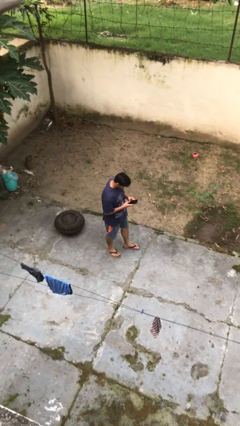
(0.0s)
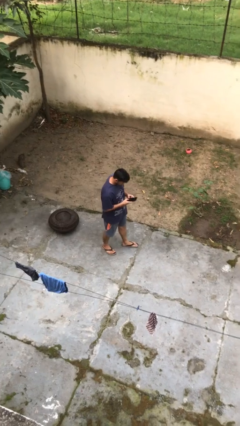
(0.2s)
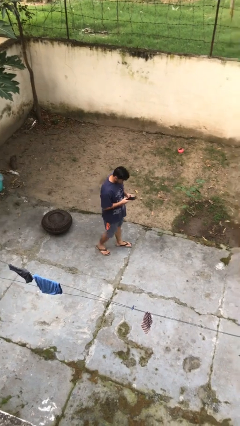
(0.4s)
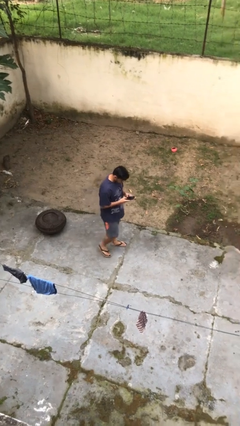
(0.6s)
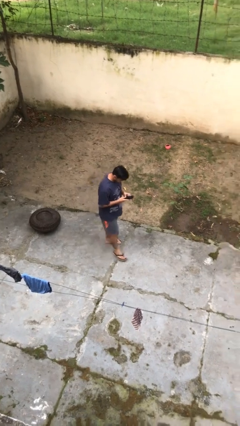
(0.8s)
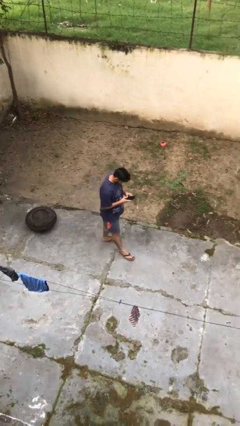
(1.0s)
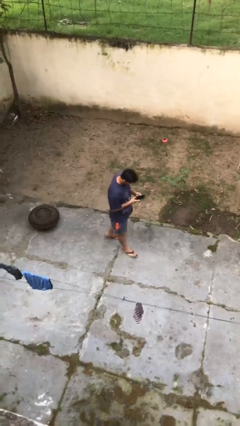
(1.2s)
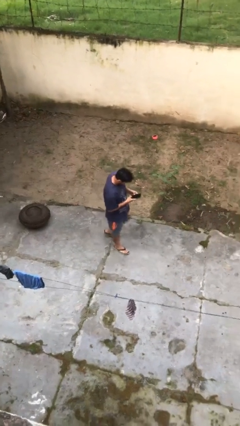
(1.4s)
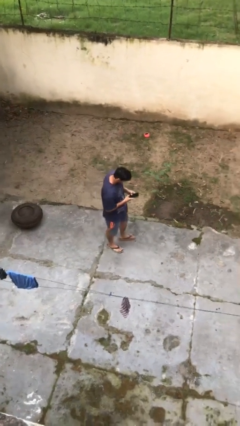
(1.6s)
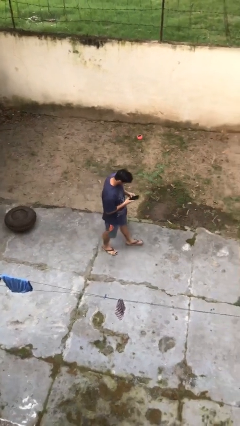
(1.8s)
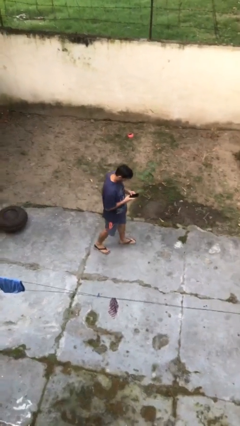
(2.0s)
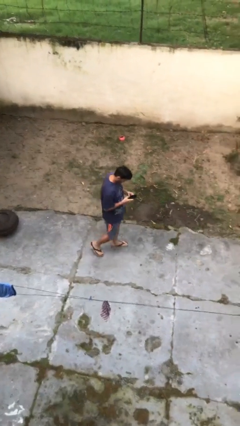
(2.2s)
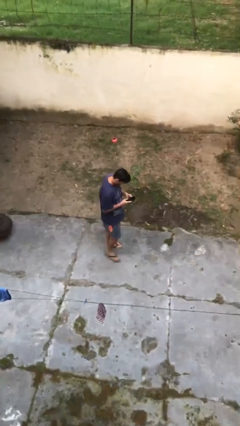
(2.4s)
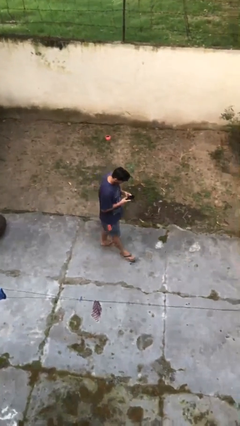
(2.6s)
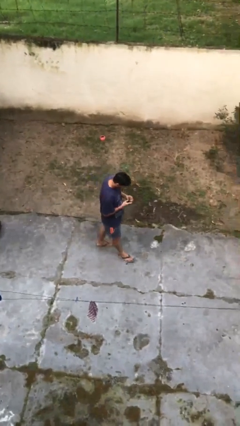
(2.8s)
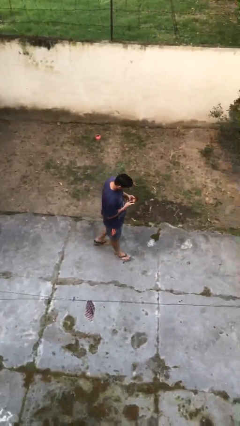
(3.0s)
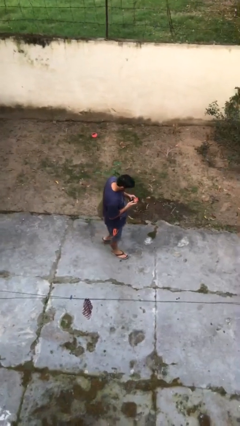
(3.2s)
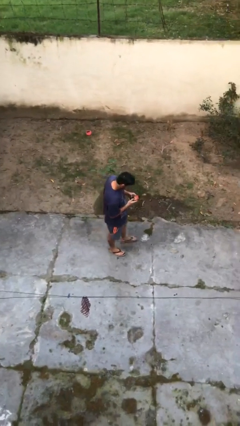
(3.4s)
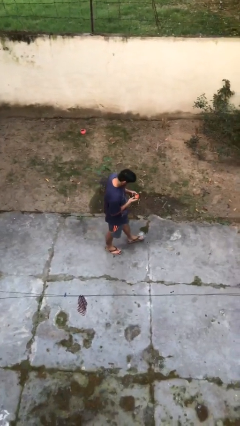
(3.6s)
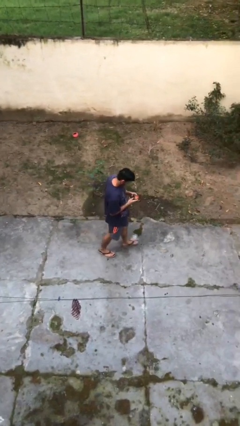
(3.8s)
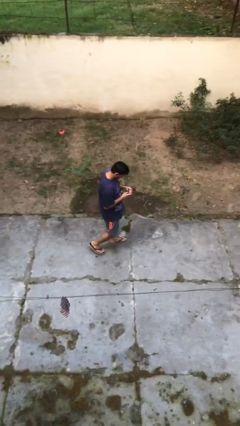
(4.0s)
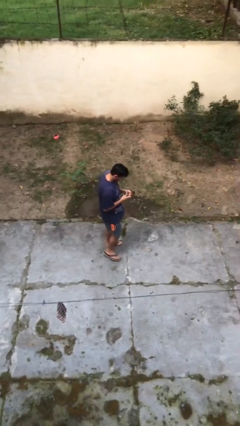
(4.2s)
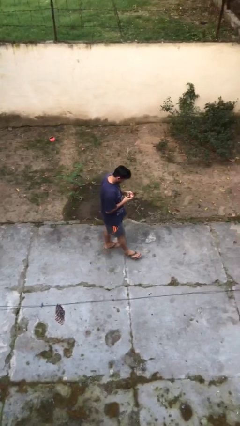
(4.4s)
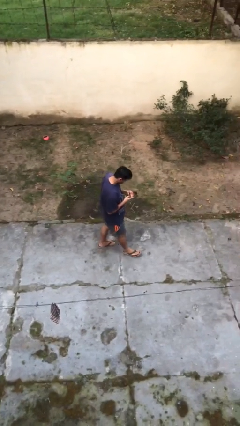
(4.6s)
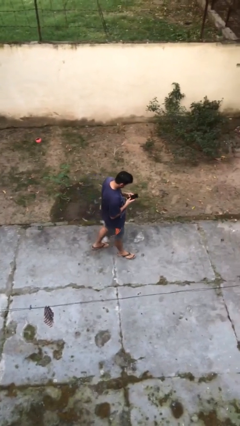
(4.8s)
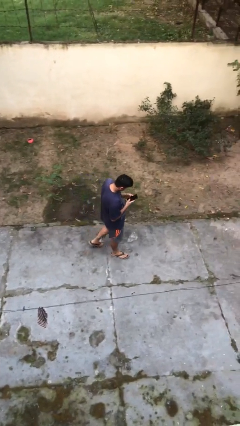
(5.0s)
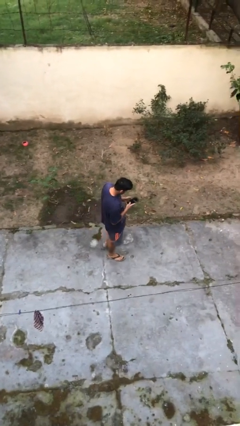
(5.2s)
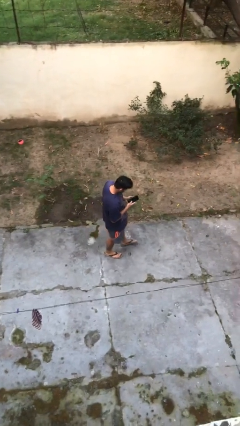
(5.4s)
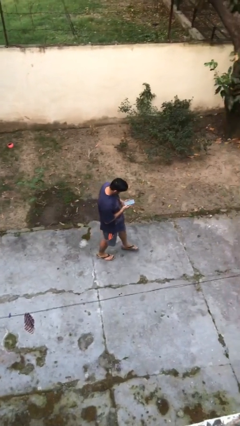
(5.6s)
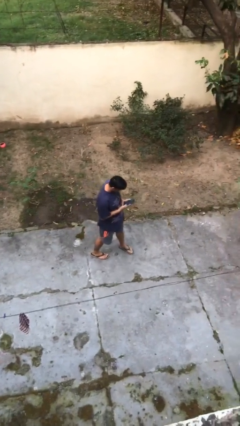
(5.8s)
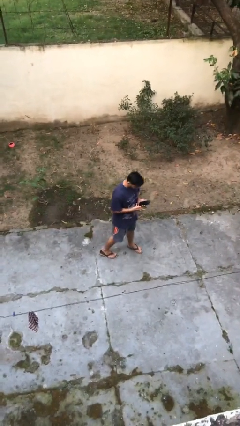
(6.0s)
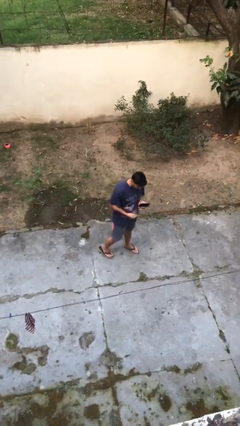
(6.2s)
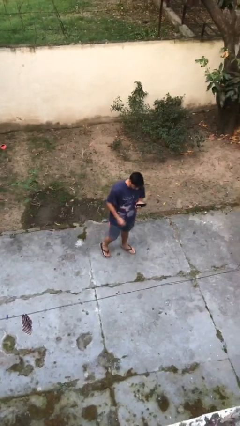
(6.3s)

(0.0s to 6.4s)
person texts on phone

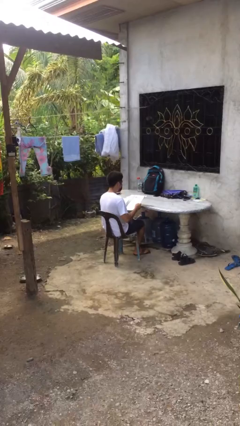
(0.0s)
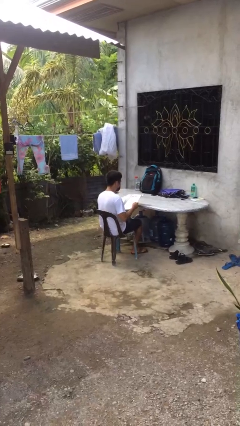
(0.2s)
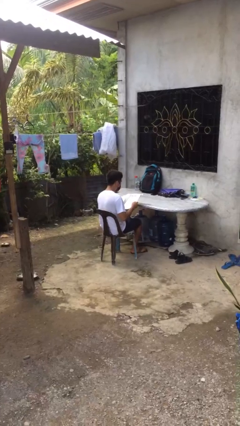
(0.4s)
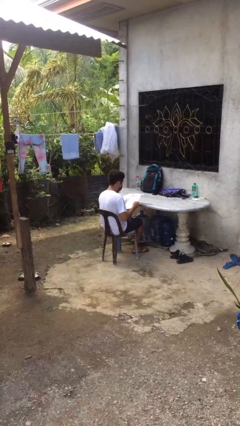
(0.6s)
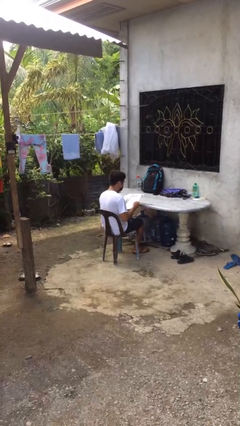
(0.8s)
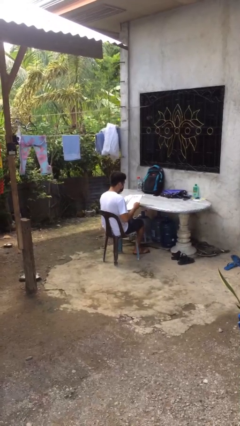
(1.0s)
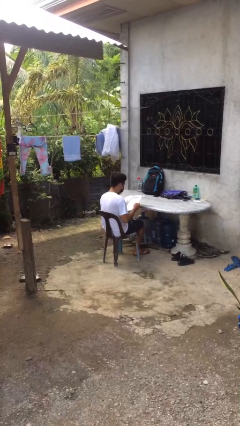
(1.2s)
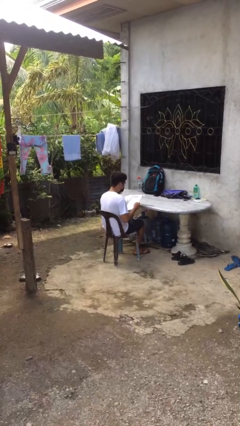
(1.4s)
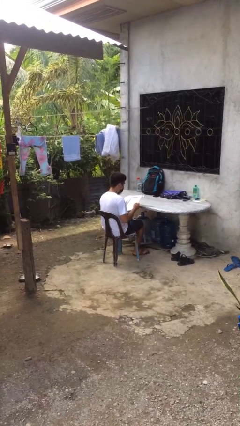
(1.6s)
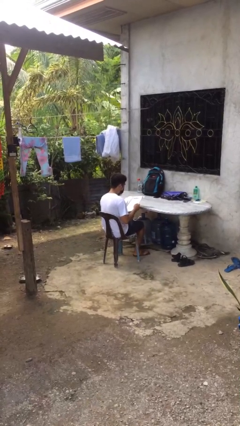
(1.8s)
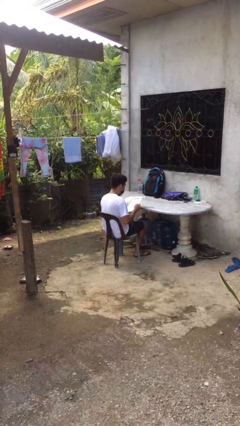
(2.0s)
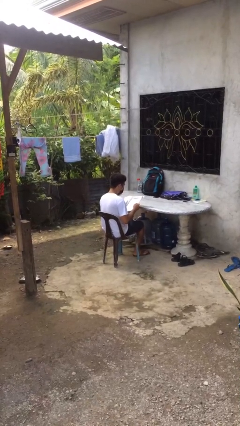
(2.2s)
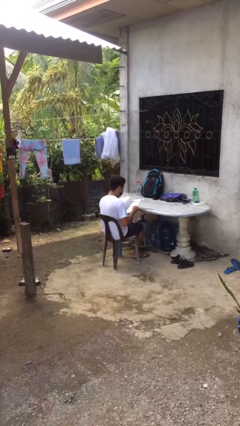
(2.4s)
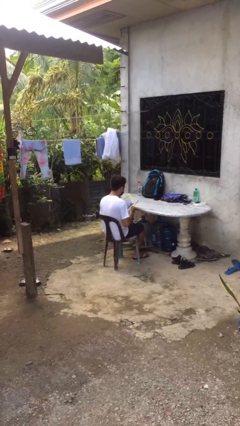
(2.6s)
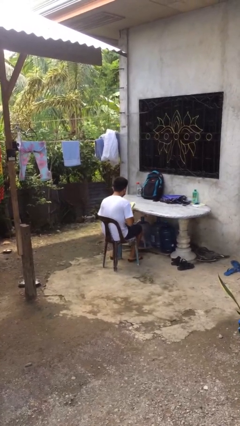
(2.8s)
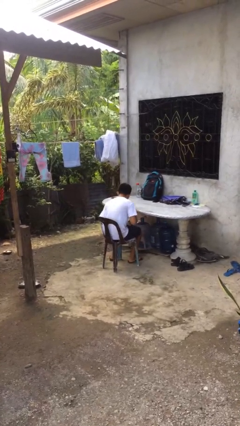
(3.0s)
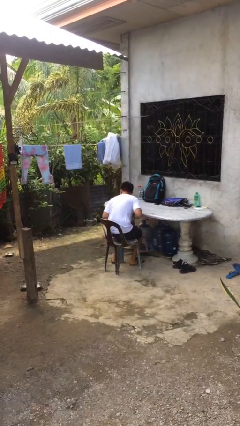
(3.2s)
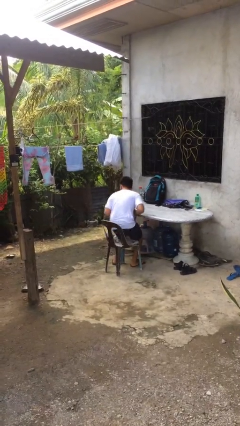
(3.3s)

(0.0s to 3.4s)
person reads document

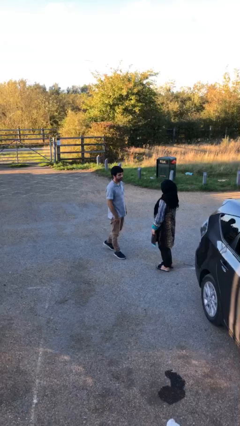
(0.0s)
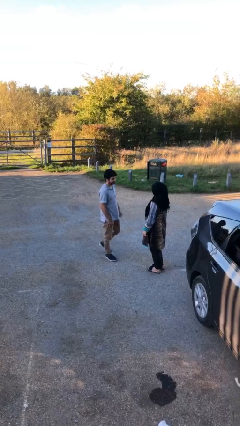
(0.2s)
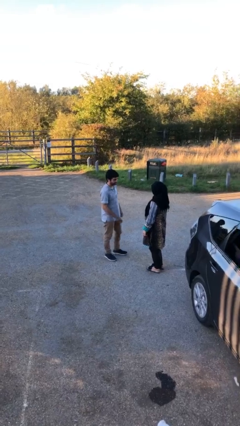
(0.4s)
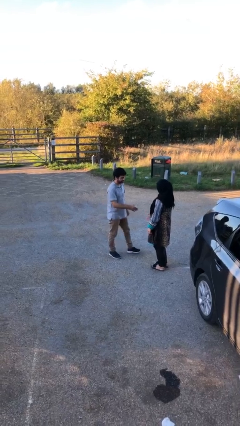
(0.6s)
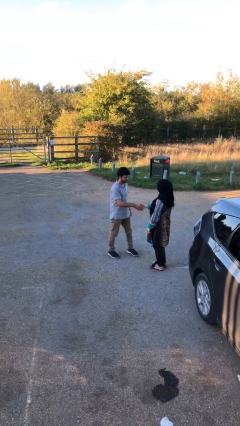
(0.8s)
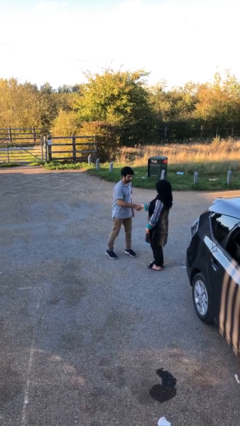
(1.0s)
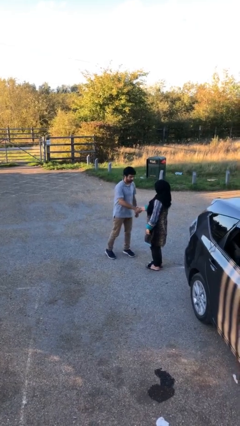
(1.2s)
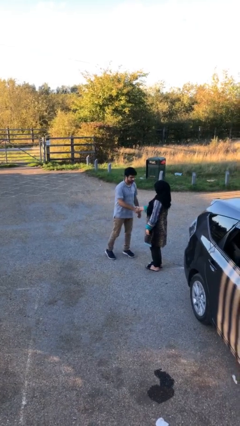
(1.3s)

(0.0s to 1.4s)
person shakes hand

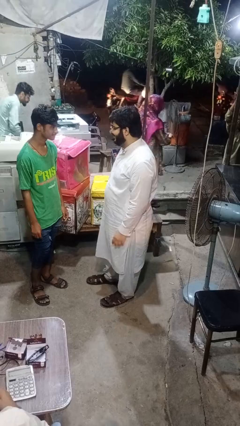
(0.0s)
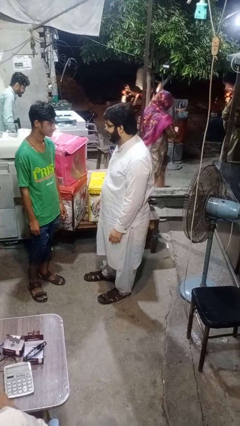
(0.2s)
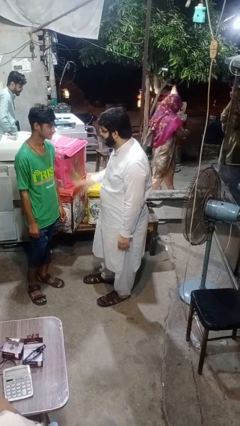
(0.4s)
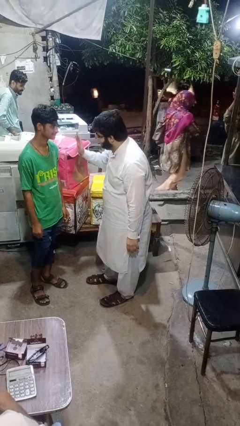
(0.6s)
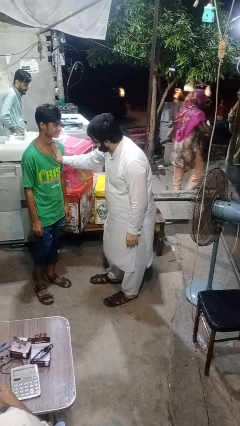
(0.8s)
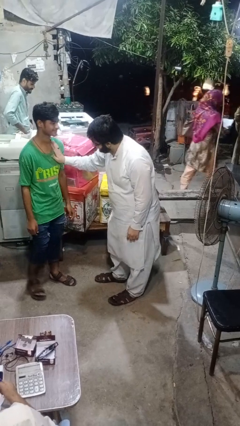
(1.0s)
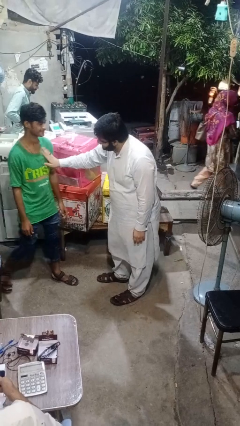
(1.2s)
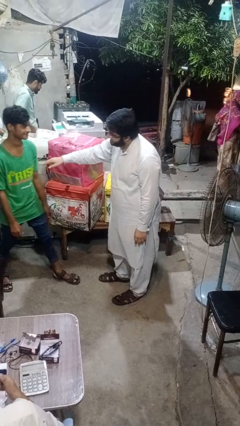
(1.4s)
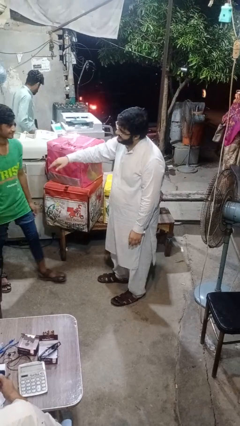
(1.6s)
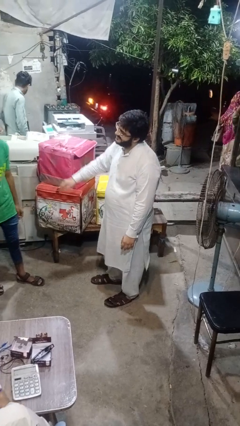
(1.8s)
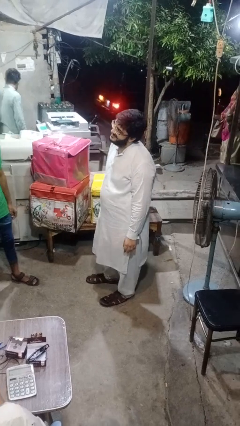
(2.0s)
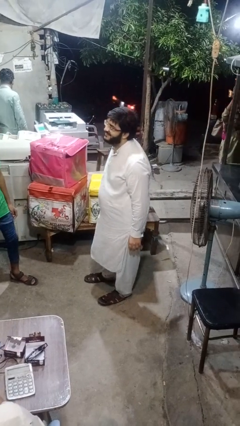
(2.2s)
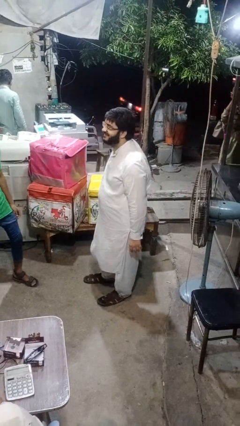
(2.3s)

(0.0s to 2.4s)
person shoves person

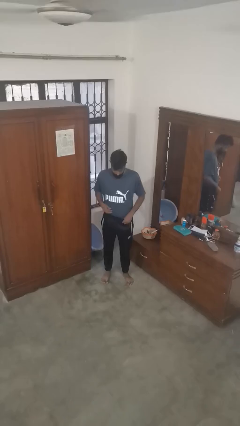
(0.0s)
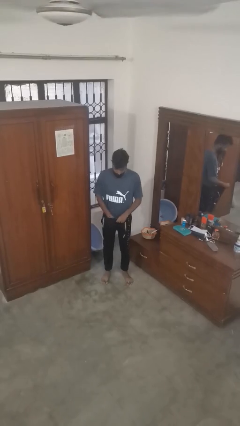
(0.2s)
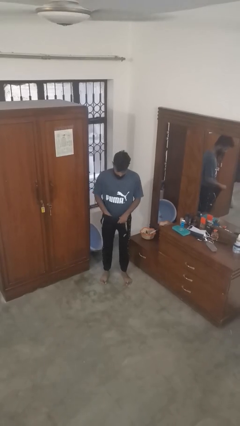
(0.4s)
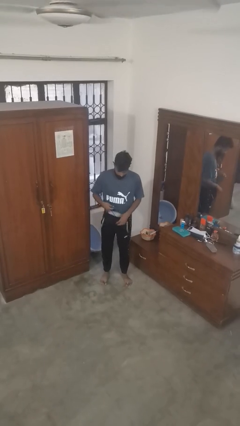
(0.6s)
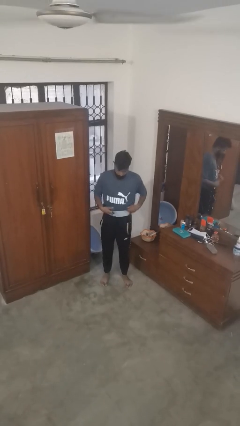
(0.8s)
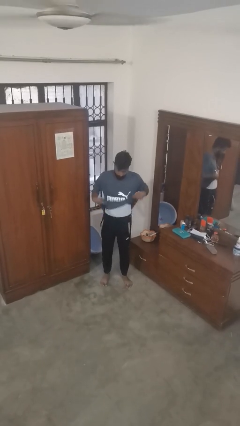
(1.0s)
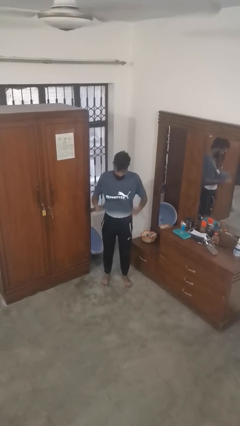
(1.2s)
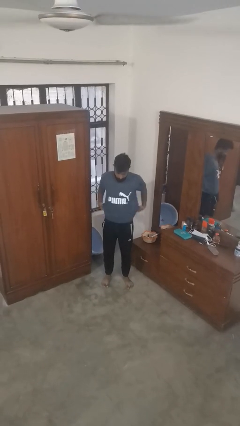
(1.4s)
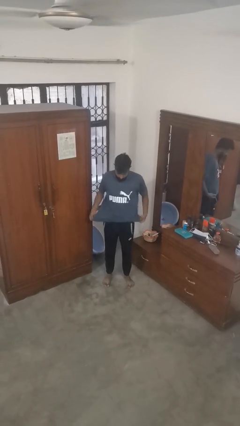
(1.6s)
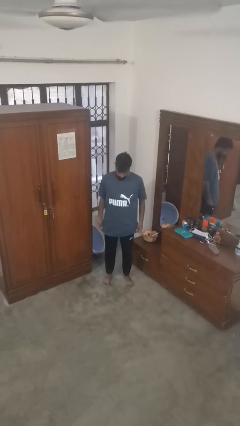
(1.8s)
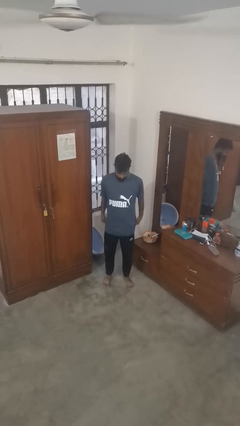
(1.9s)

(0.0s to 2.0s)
person untucks shirt

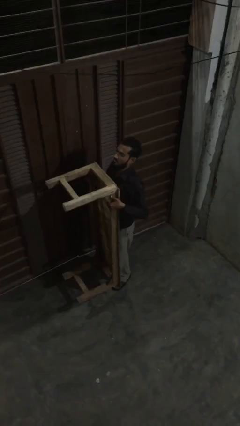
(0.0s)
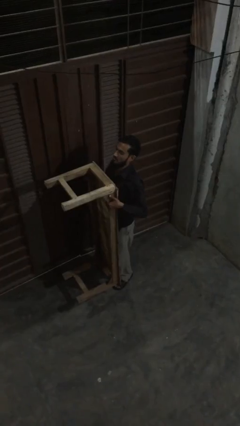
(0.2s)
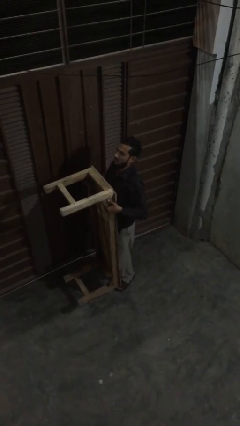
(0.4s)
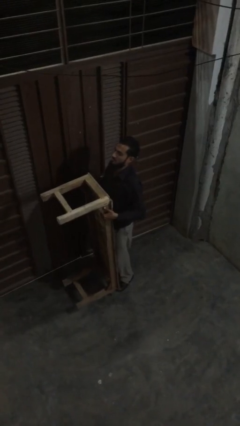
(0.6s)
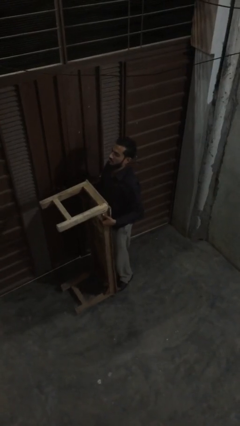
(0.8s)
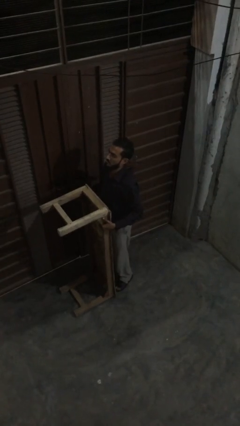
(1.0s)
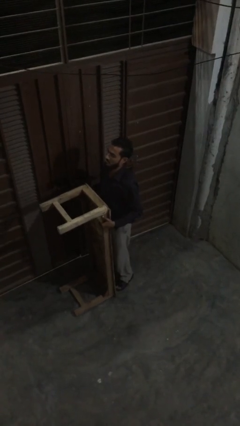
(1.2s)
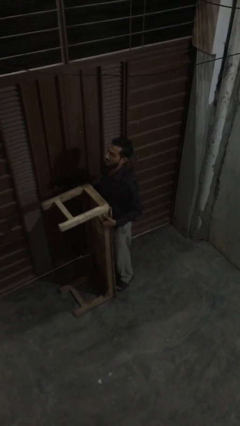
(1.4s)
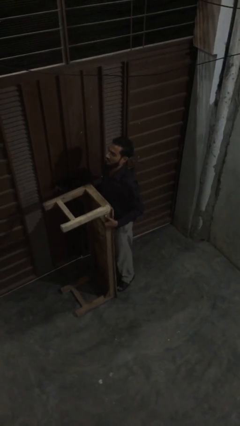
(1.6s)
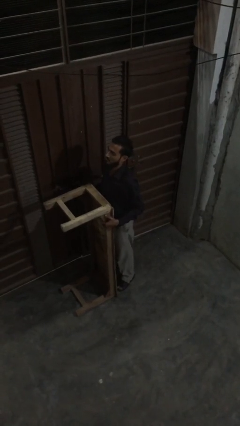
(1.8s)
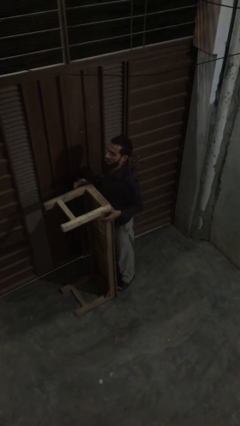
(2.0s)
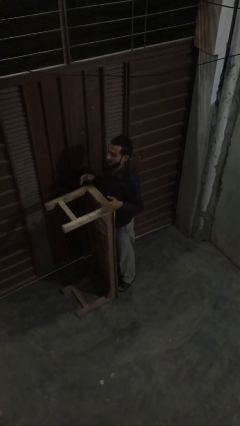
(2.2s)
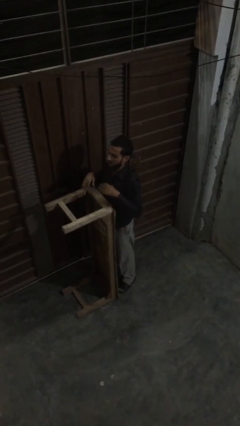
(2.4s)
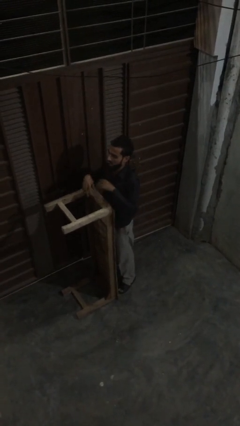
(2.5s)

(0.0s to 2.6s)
person puts down object on floor
